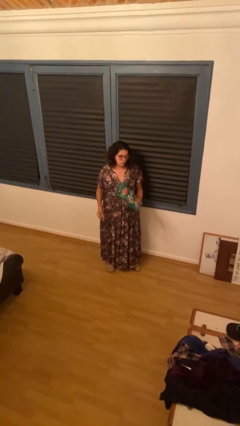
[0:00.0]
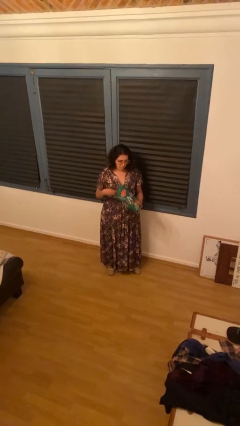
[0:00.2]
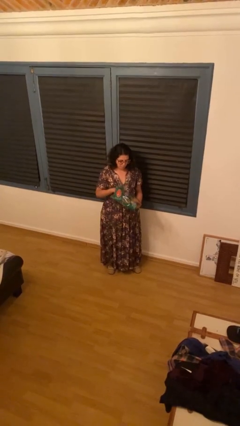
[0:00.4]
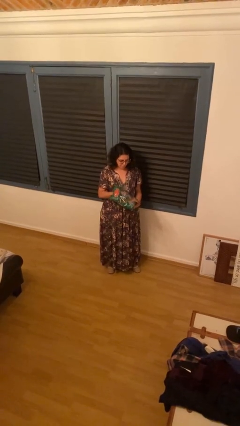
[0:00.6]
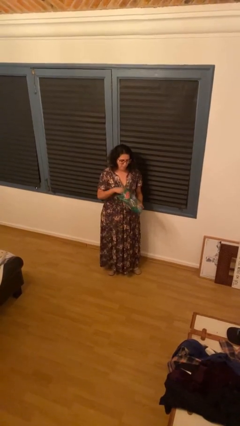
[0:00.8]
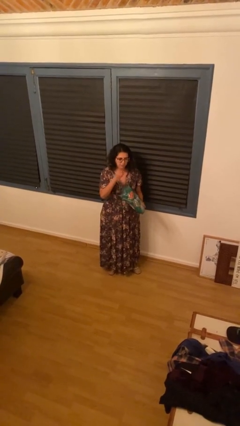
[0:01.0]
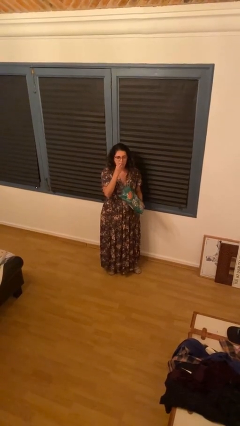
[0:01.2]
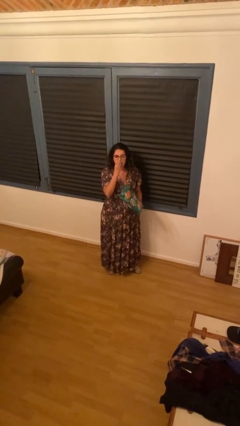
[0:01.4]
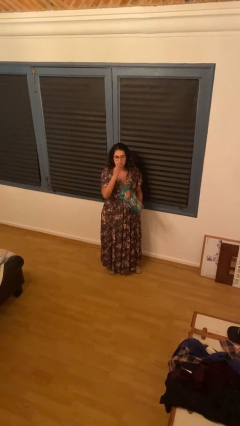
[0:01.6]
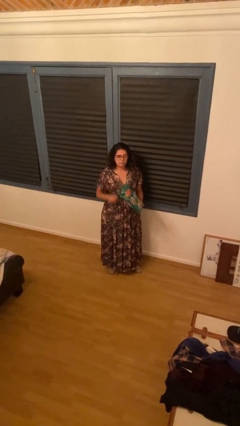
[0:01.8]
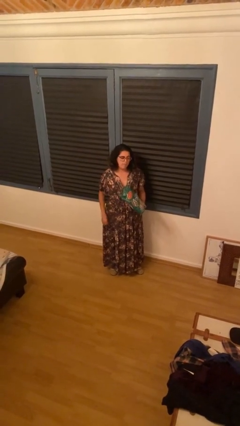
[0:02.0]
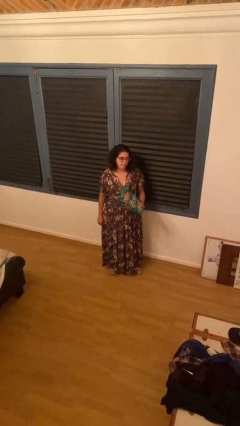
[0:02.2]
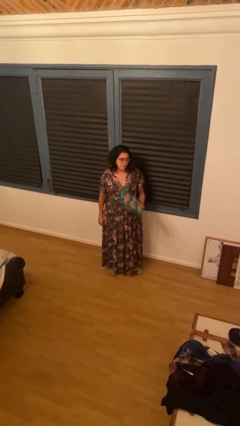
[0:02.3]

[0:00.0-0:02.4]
person eats snack from bag

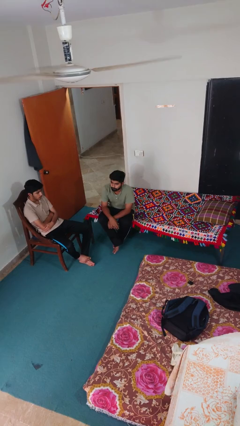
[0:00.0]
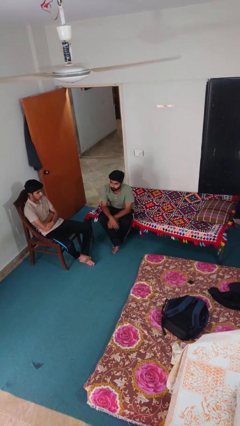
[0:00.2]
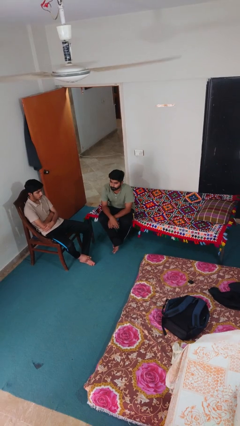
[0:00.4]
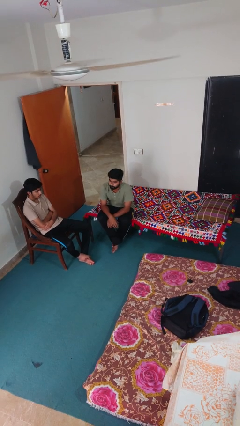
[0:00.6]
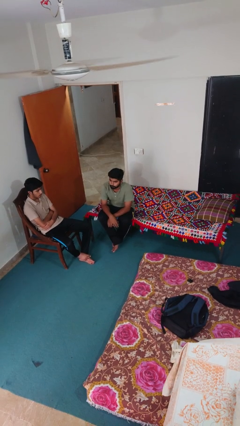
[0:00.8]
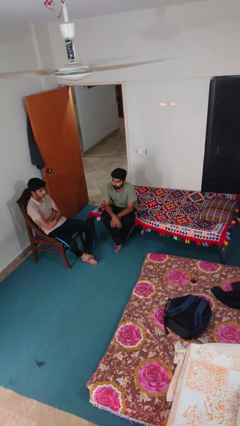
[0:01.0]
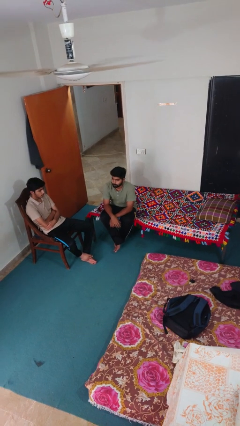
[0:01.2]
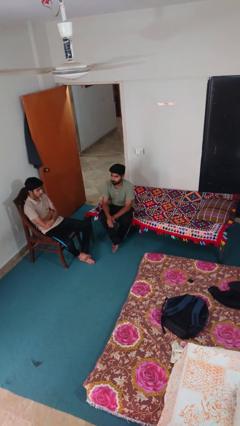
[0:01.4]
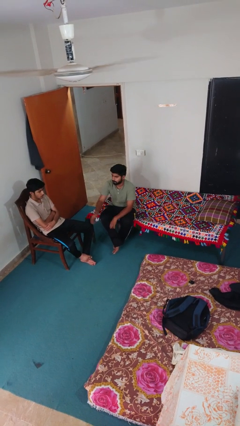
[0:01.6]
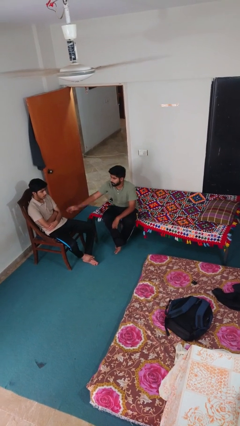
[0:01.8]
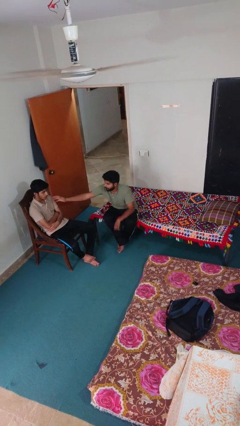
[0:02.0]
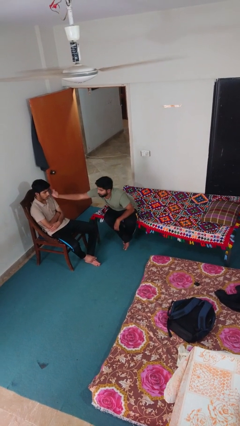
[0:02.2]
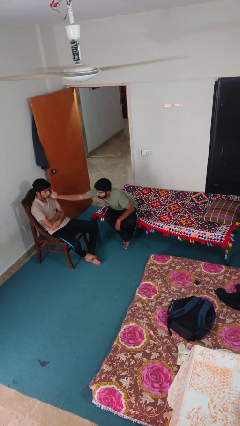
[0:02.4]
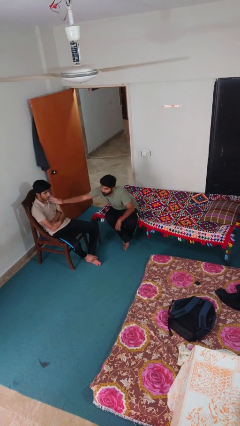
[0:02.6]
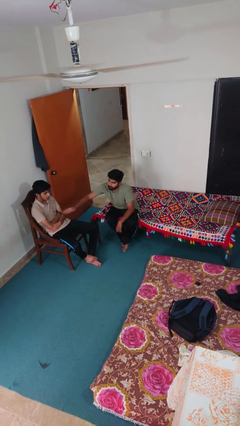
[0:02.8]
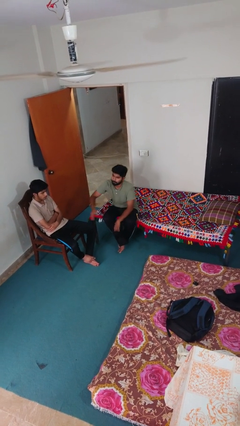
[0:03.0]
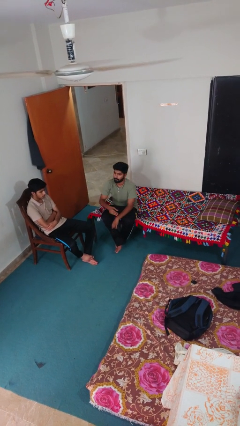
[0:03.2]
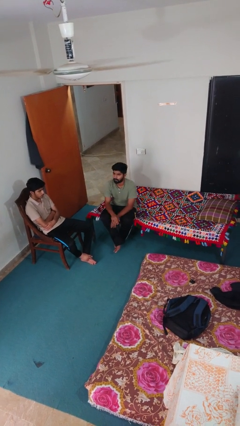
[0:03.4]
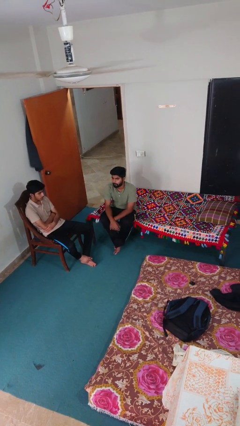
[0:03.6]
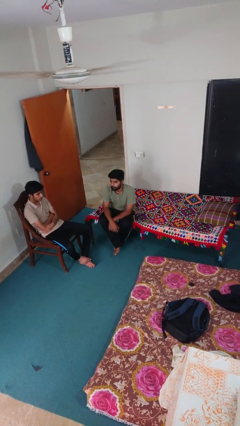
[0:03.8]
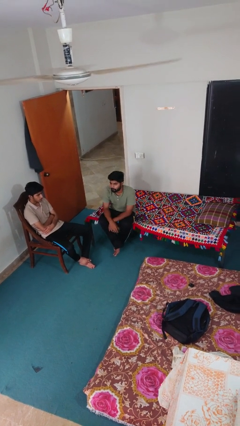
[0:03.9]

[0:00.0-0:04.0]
person touches face of person

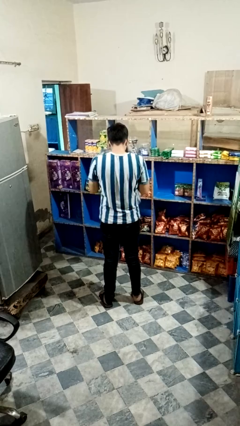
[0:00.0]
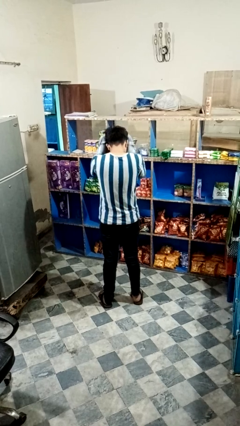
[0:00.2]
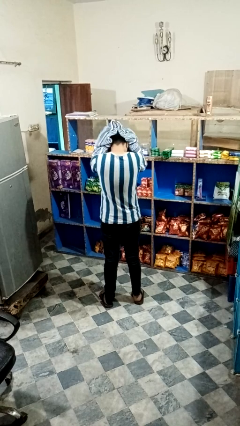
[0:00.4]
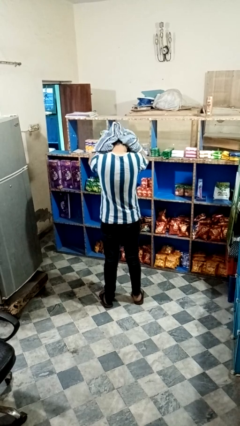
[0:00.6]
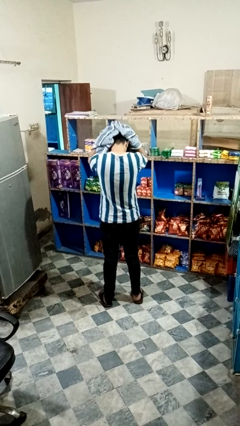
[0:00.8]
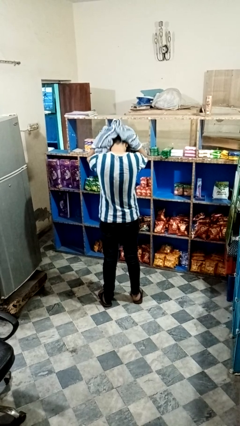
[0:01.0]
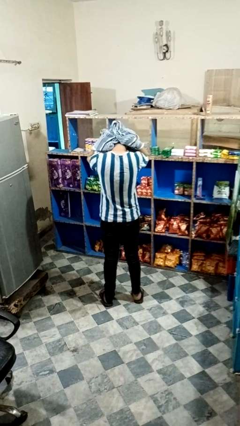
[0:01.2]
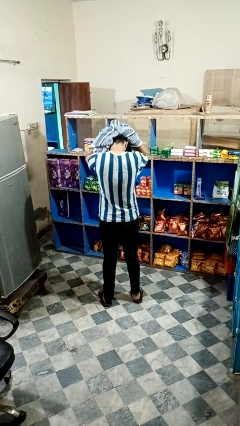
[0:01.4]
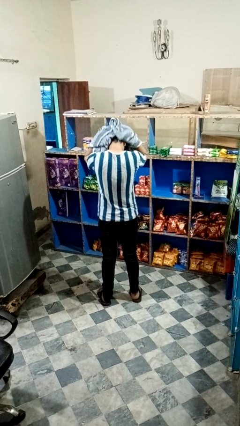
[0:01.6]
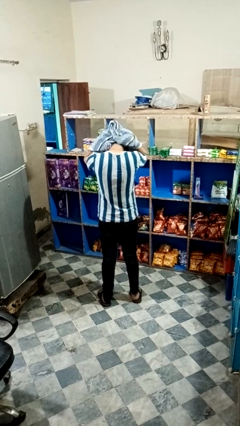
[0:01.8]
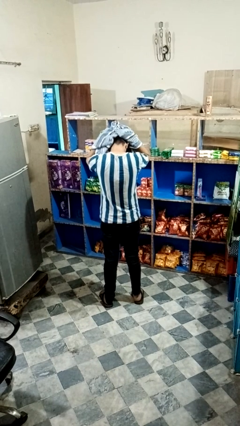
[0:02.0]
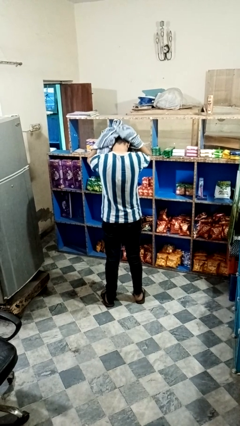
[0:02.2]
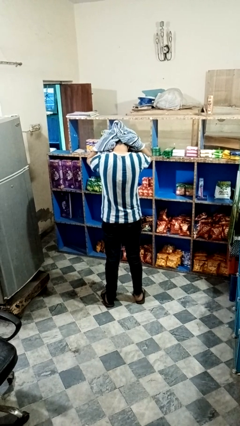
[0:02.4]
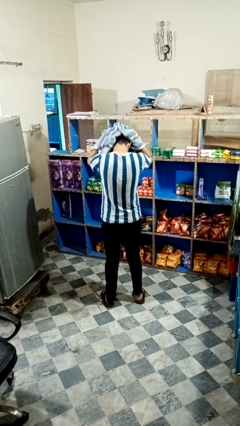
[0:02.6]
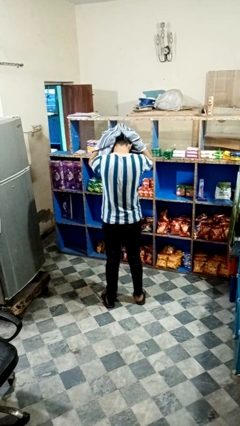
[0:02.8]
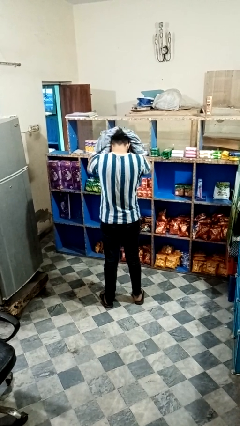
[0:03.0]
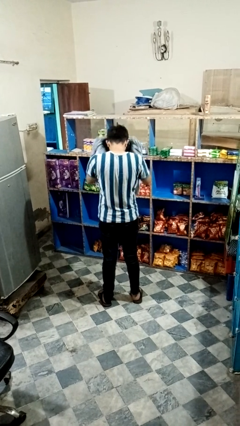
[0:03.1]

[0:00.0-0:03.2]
person dries hair with towel

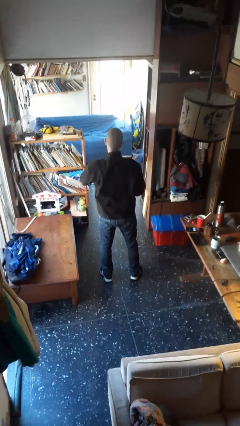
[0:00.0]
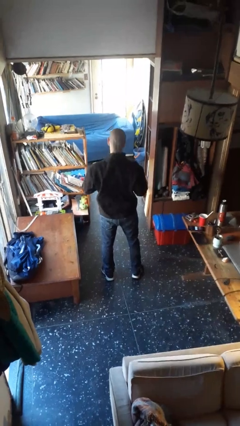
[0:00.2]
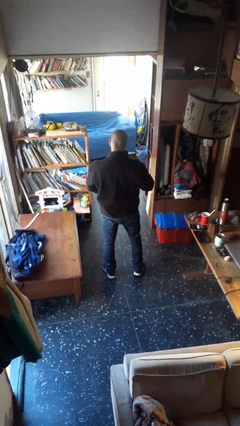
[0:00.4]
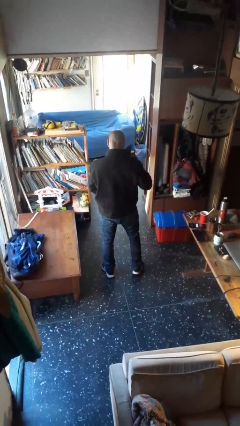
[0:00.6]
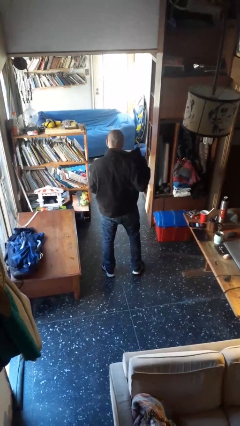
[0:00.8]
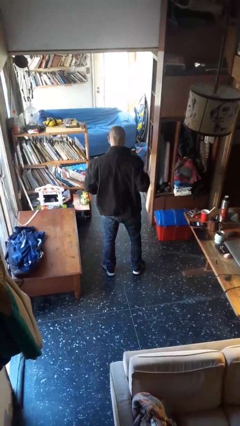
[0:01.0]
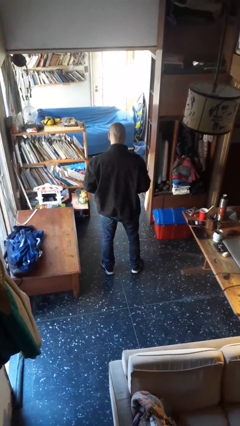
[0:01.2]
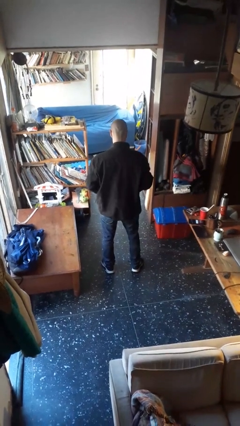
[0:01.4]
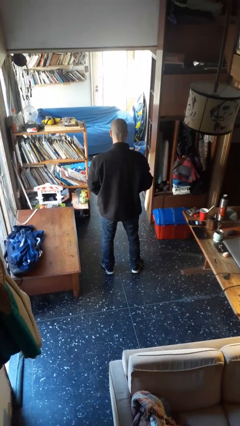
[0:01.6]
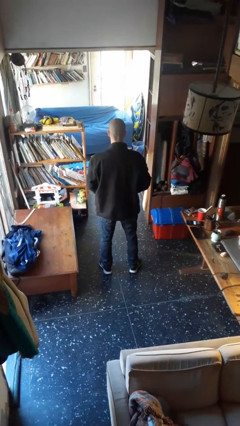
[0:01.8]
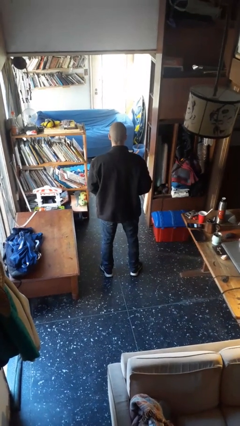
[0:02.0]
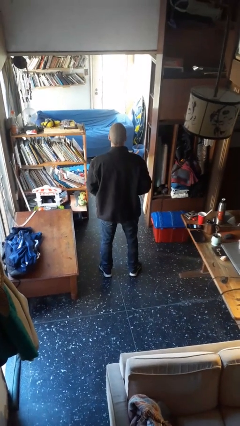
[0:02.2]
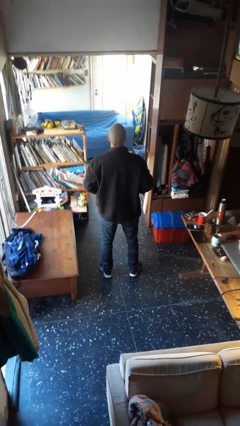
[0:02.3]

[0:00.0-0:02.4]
person unzips jacket

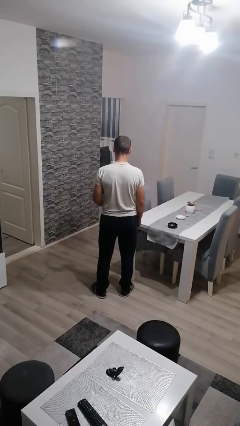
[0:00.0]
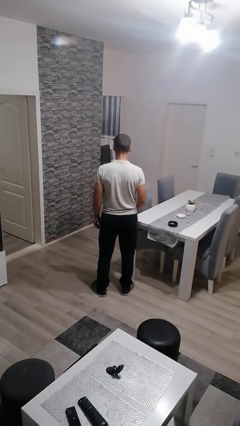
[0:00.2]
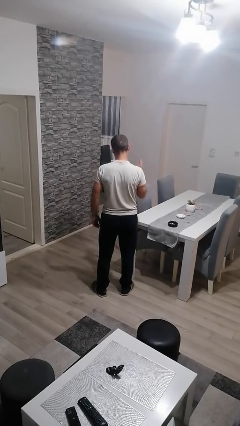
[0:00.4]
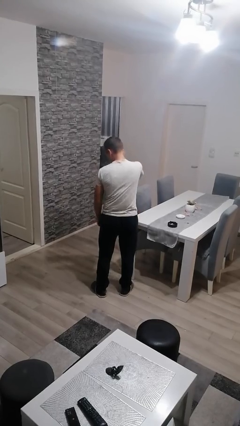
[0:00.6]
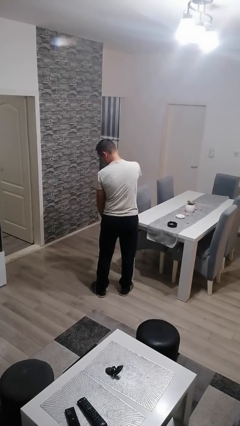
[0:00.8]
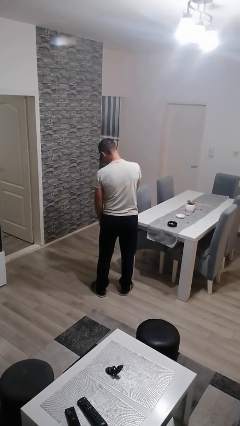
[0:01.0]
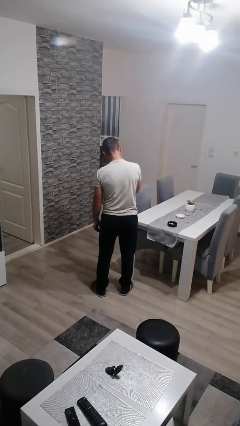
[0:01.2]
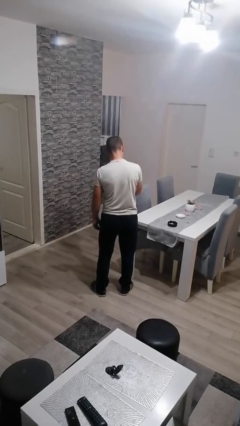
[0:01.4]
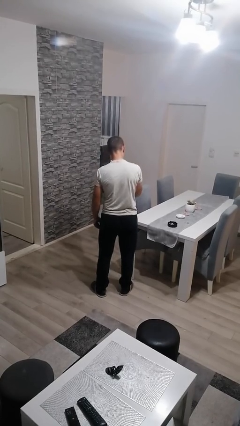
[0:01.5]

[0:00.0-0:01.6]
person swats bug

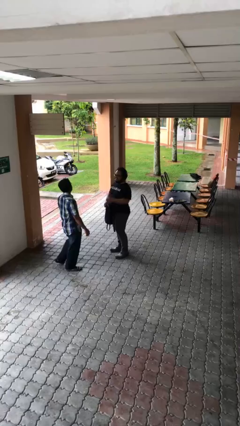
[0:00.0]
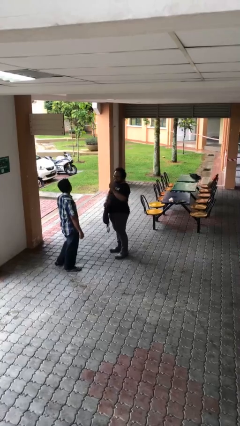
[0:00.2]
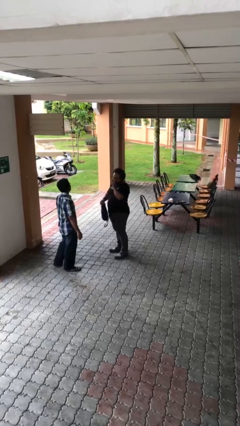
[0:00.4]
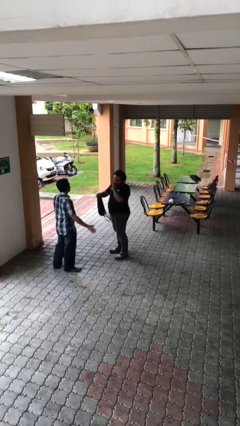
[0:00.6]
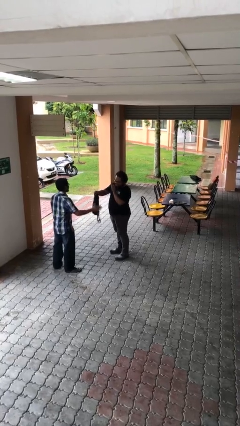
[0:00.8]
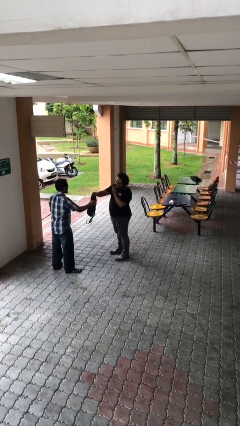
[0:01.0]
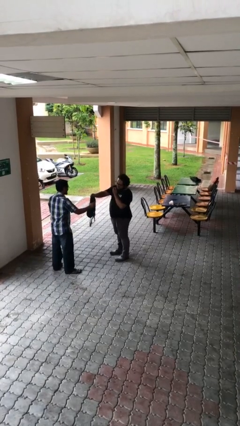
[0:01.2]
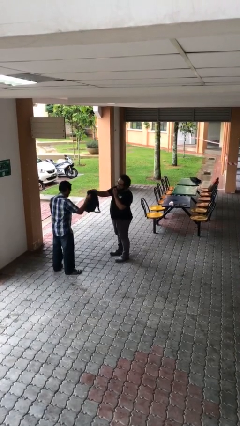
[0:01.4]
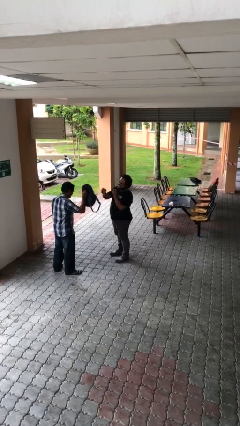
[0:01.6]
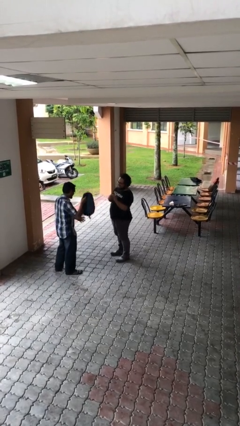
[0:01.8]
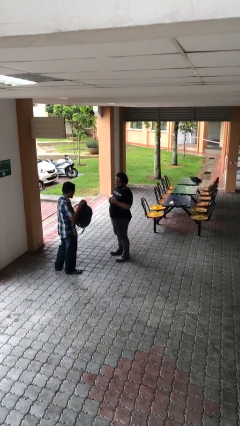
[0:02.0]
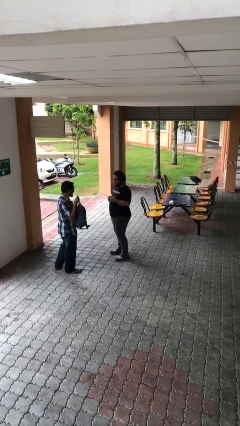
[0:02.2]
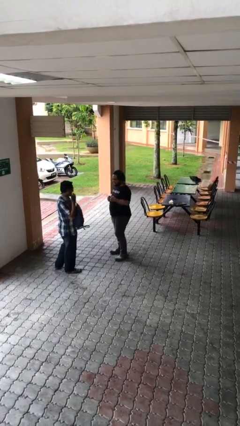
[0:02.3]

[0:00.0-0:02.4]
person transfers object to person

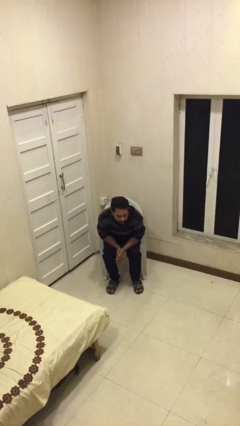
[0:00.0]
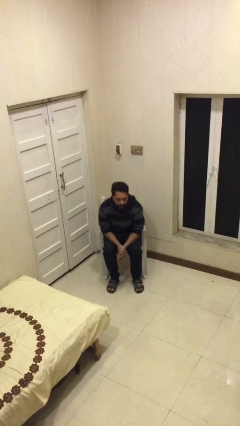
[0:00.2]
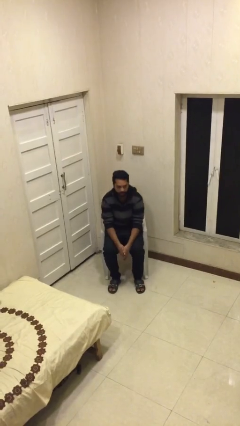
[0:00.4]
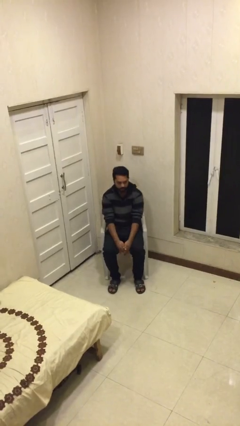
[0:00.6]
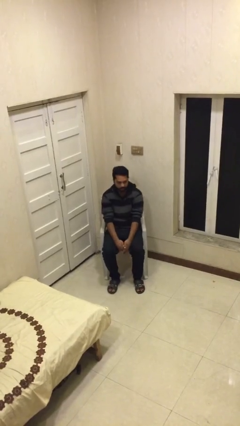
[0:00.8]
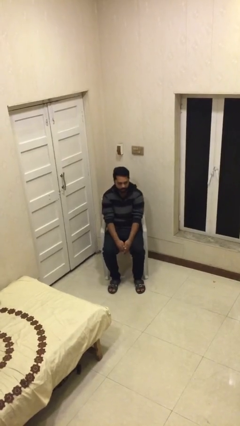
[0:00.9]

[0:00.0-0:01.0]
person sits down
